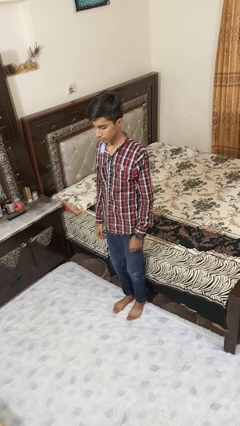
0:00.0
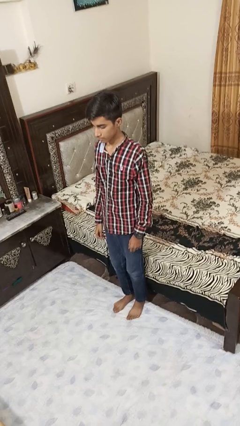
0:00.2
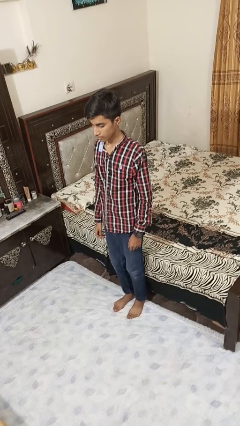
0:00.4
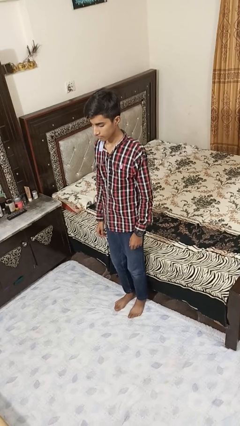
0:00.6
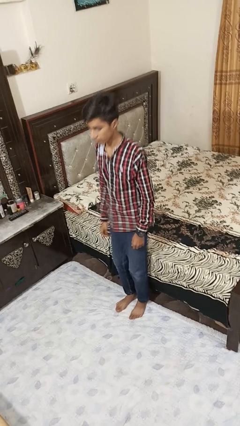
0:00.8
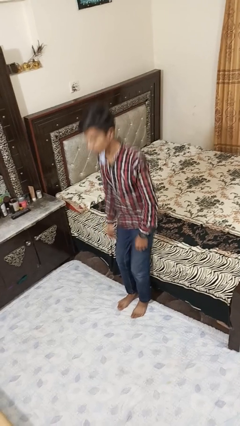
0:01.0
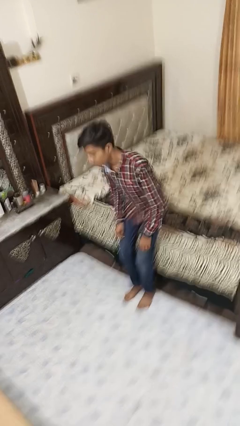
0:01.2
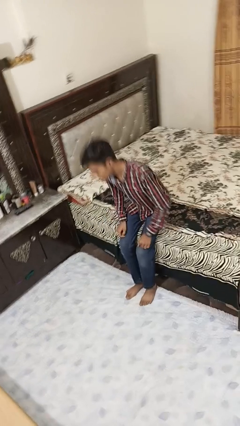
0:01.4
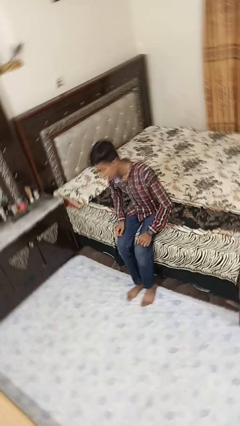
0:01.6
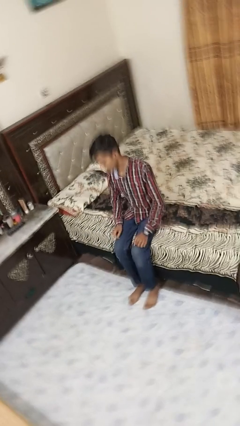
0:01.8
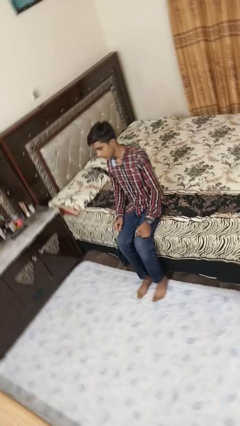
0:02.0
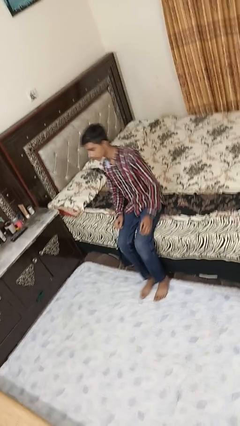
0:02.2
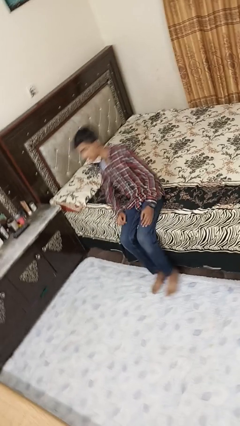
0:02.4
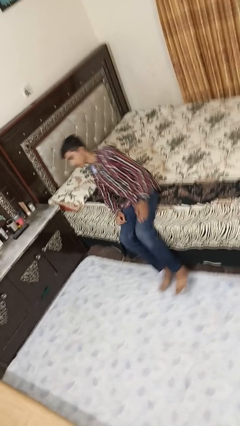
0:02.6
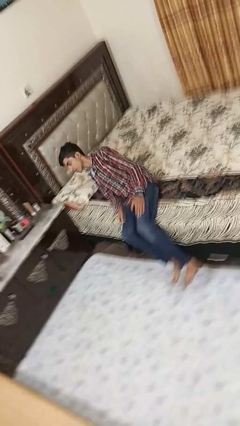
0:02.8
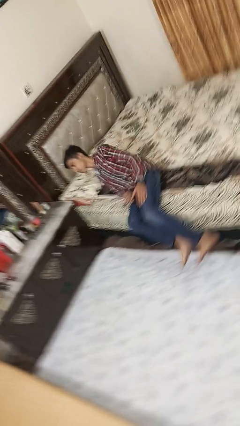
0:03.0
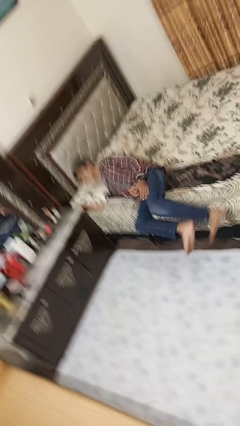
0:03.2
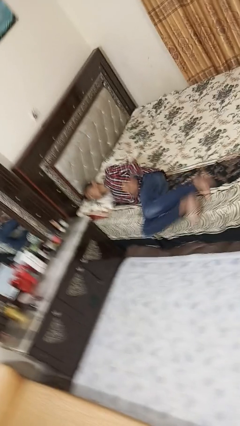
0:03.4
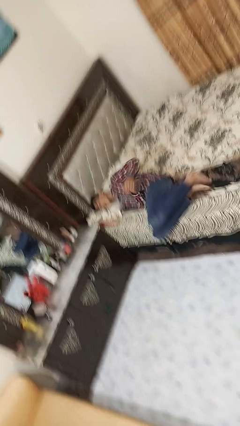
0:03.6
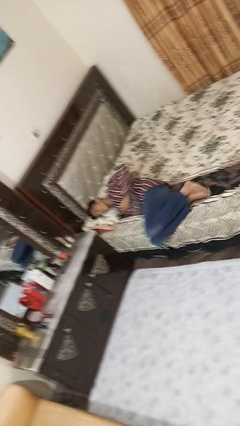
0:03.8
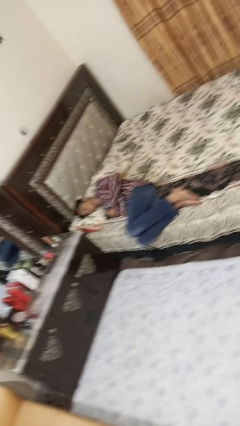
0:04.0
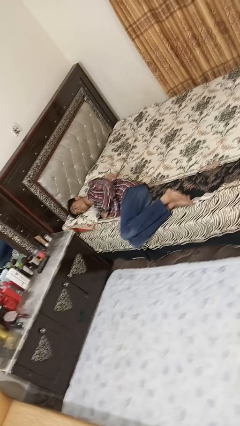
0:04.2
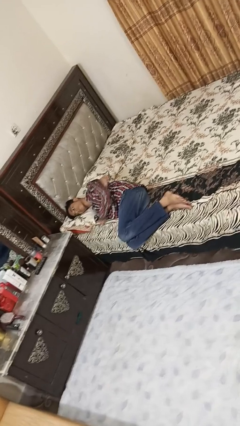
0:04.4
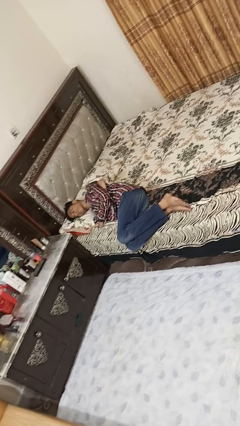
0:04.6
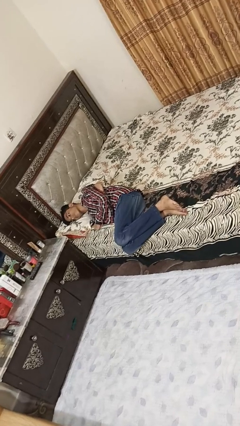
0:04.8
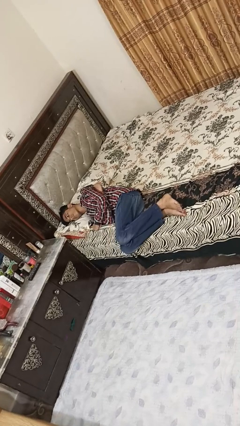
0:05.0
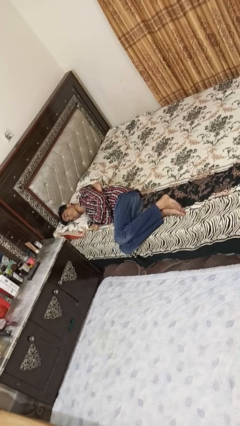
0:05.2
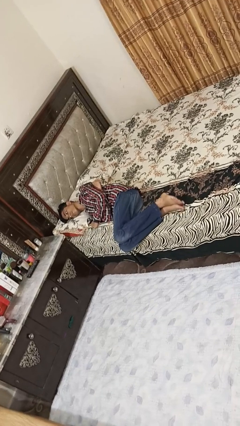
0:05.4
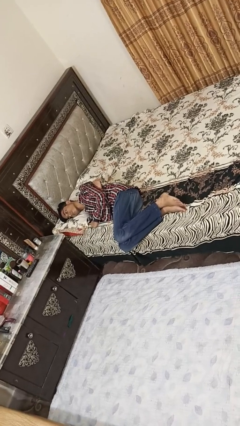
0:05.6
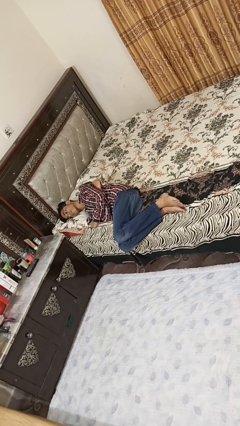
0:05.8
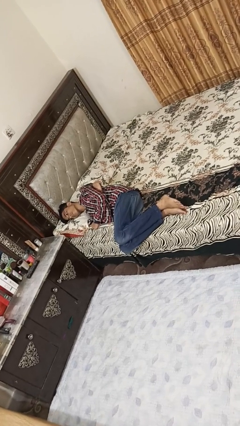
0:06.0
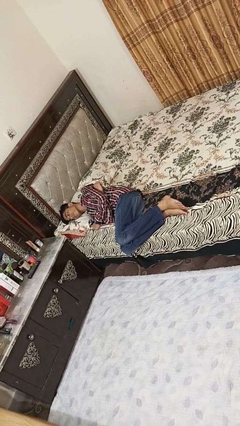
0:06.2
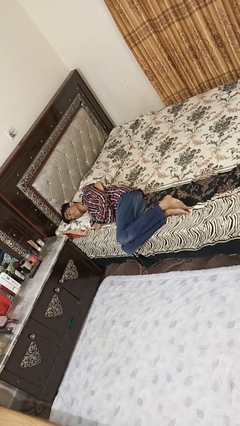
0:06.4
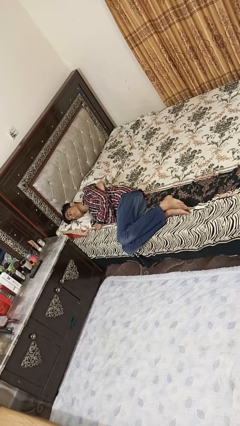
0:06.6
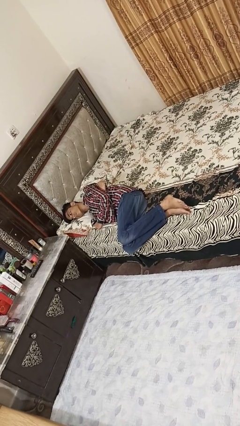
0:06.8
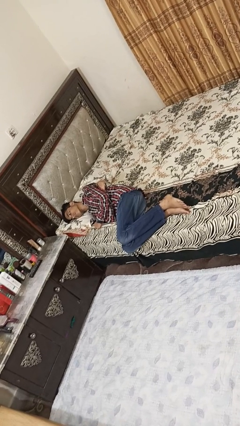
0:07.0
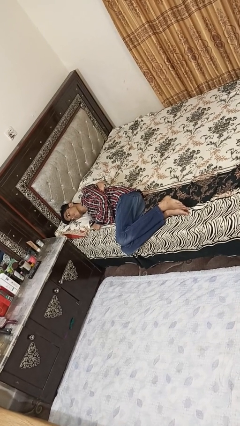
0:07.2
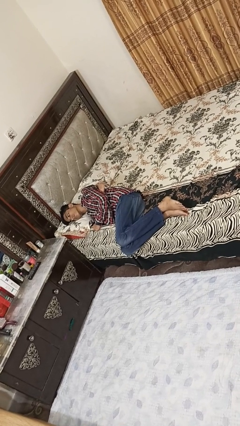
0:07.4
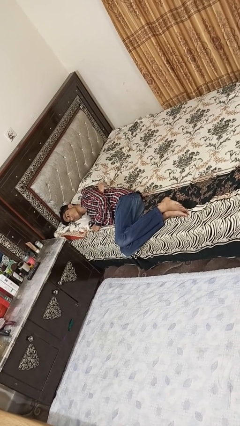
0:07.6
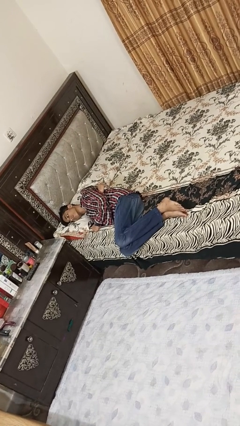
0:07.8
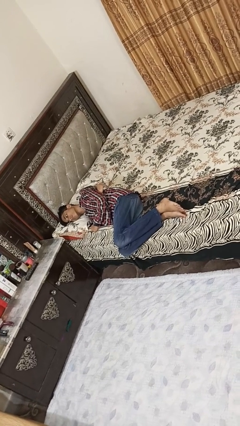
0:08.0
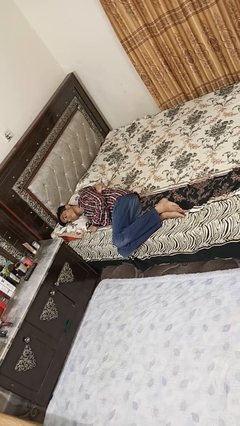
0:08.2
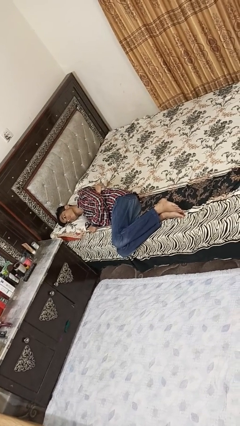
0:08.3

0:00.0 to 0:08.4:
person lies down on bed

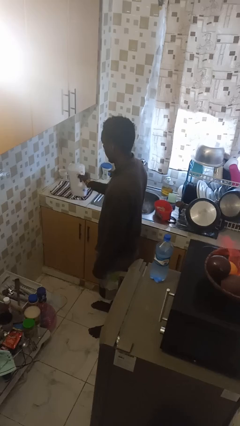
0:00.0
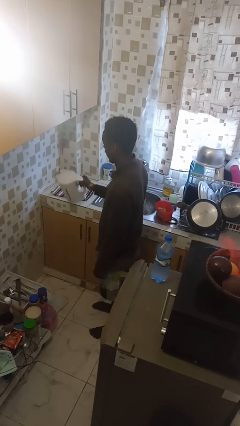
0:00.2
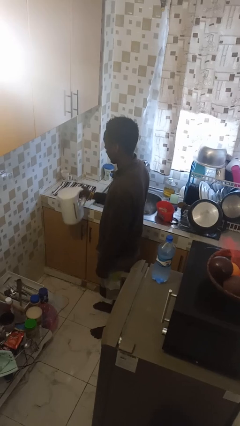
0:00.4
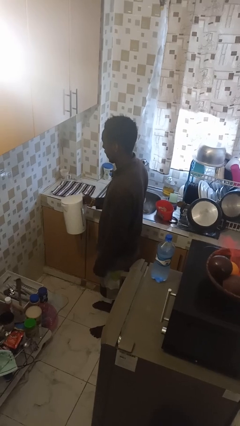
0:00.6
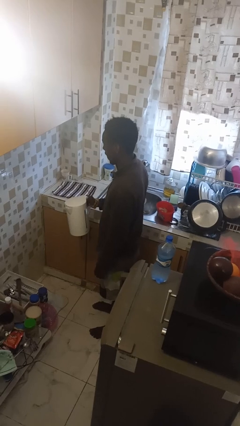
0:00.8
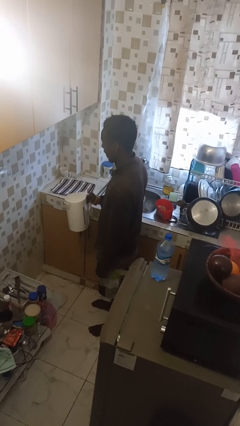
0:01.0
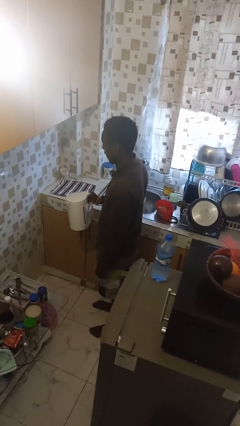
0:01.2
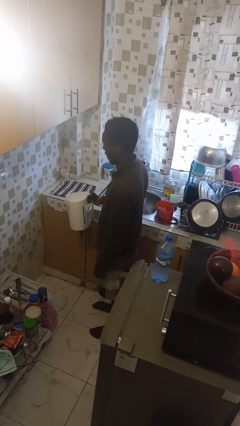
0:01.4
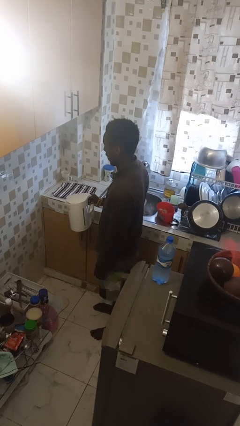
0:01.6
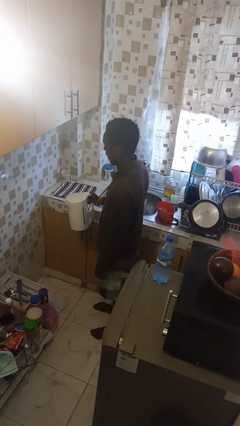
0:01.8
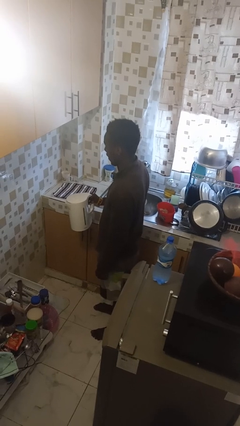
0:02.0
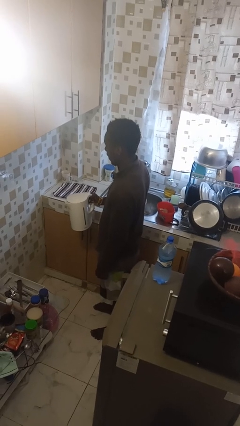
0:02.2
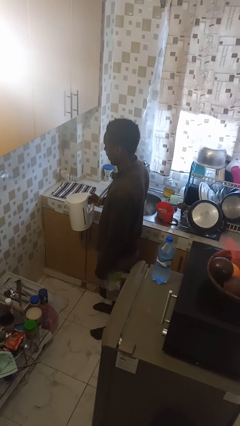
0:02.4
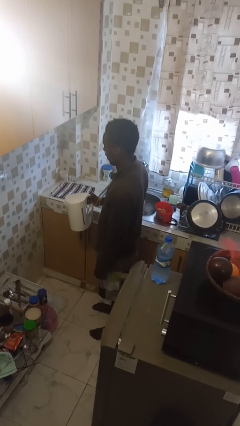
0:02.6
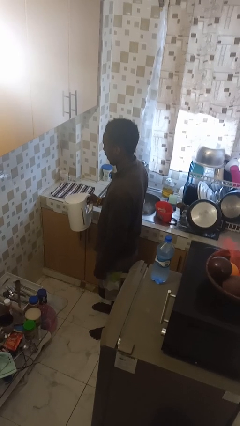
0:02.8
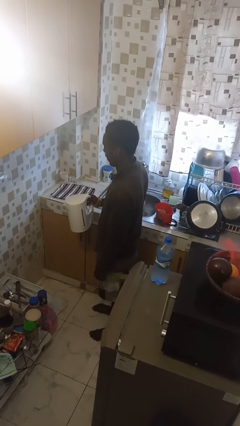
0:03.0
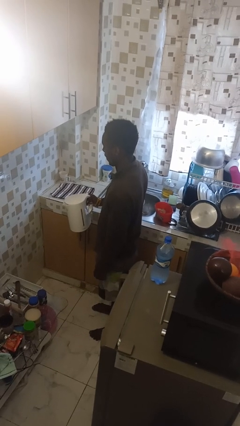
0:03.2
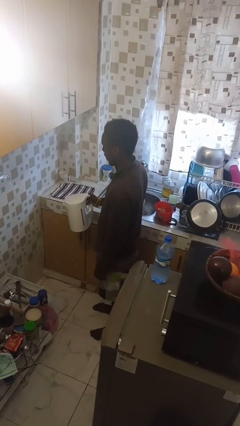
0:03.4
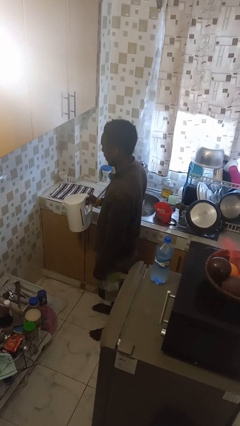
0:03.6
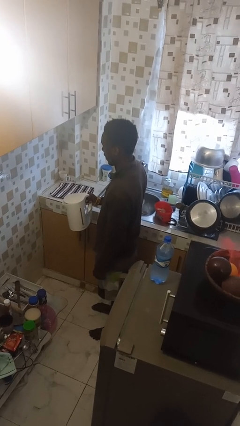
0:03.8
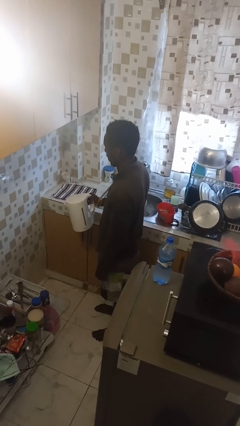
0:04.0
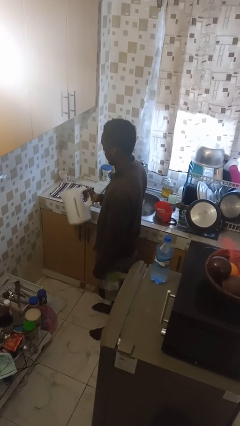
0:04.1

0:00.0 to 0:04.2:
person picks up object from countertop

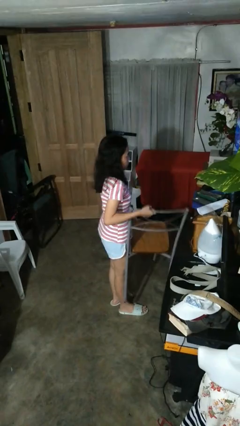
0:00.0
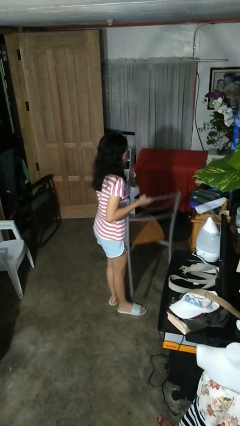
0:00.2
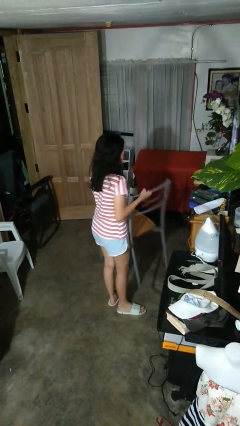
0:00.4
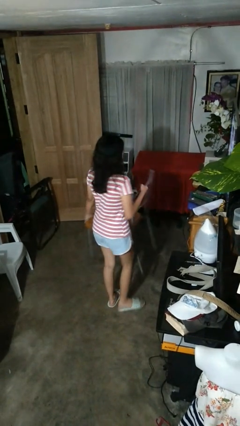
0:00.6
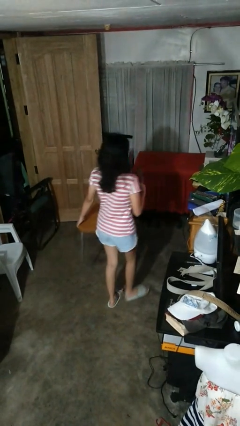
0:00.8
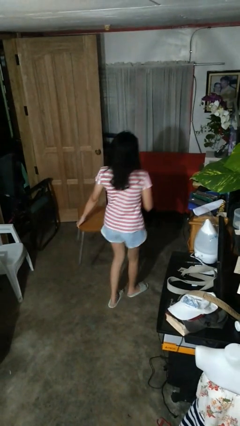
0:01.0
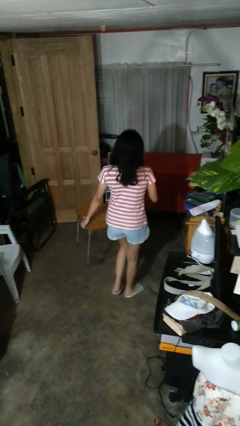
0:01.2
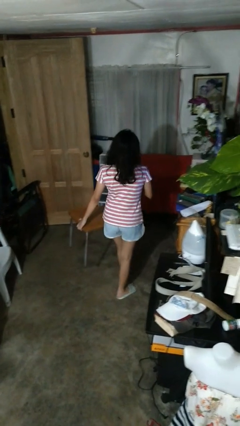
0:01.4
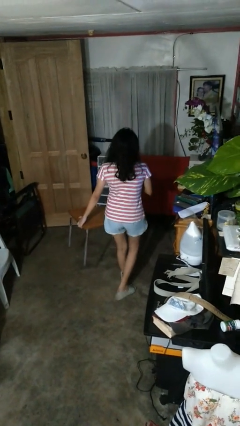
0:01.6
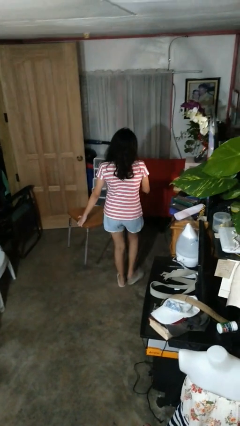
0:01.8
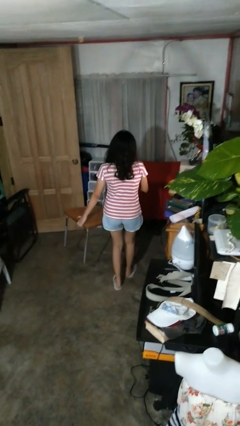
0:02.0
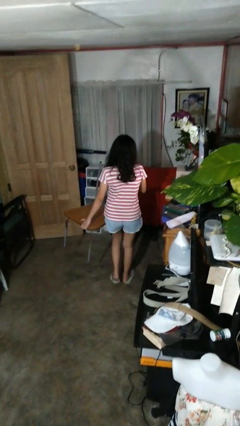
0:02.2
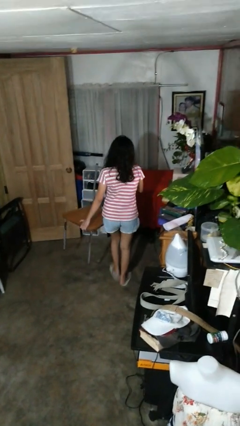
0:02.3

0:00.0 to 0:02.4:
person carries furniture

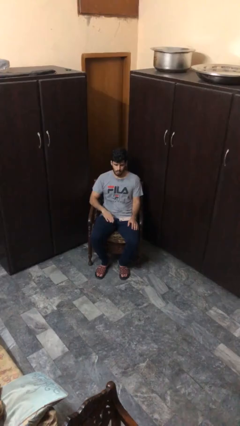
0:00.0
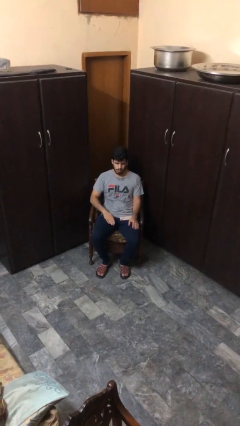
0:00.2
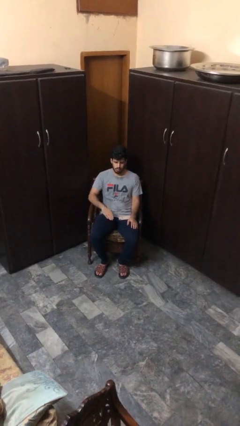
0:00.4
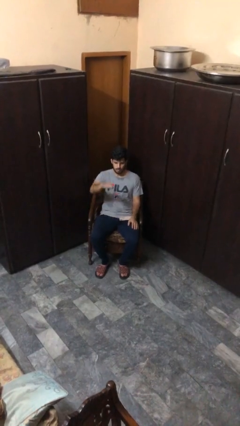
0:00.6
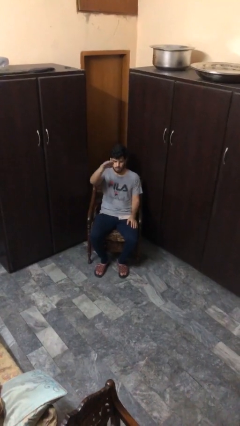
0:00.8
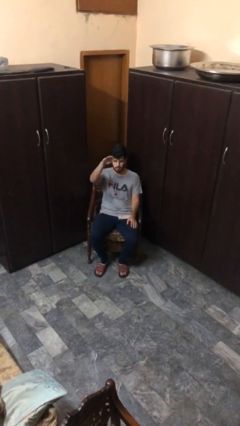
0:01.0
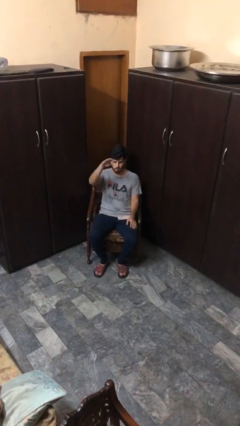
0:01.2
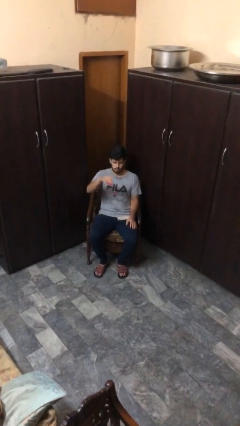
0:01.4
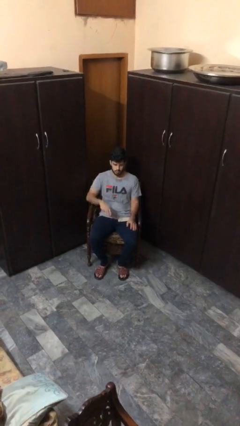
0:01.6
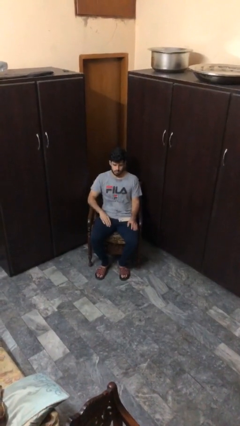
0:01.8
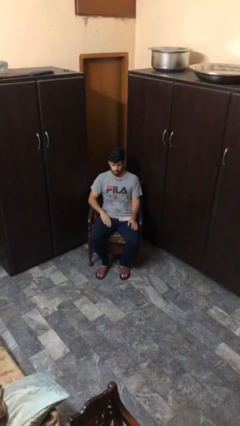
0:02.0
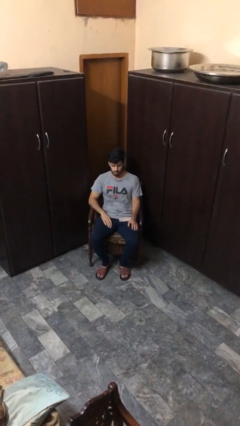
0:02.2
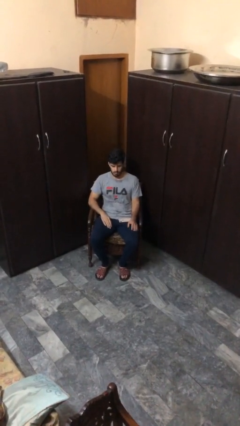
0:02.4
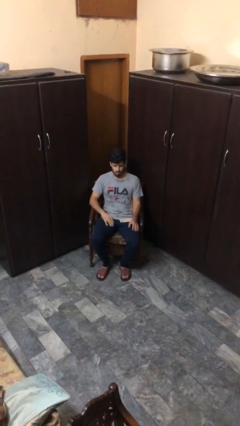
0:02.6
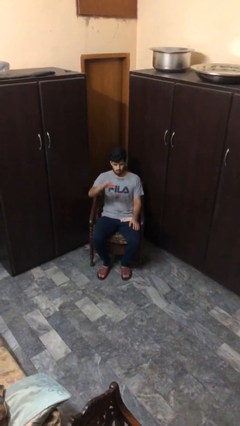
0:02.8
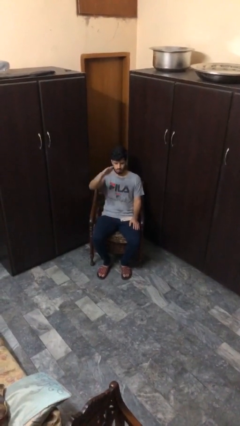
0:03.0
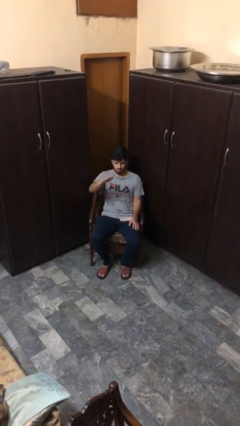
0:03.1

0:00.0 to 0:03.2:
person gestures swipe up
